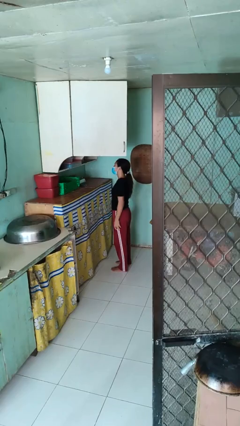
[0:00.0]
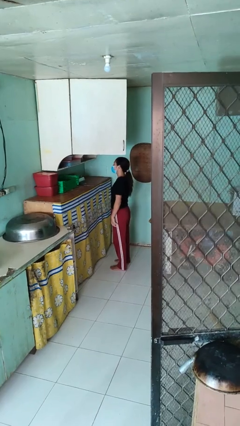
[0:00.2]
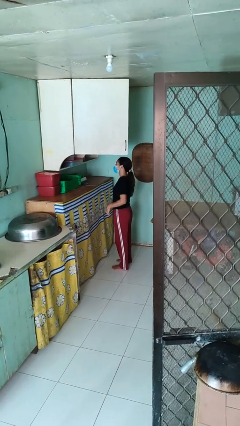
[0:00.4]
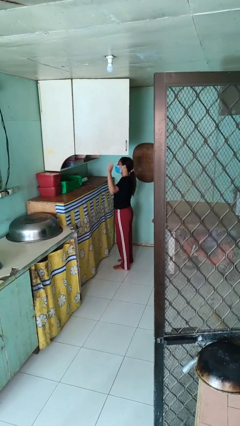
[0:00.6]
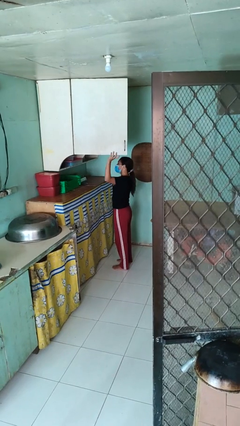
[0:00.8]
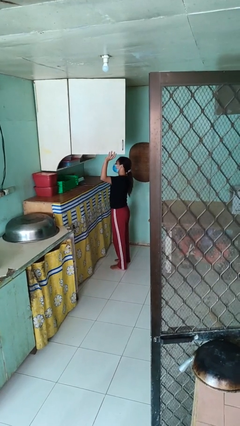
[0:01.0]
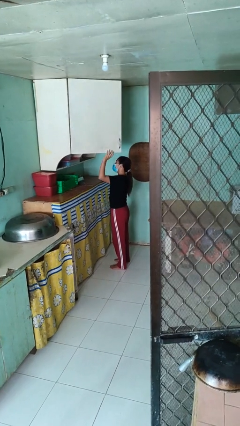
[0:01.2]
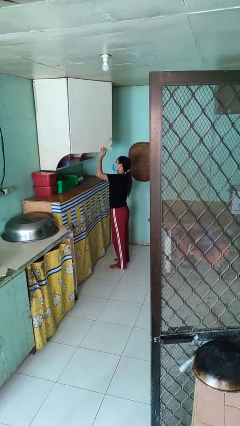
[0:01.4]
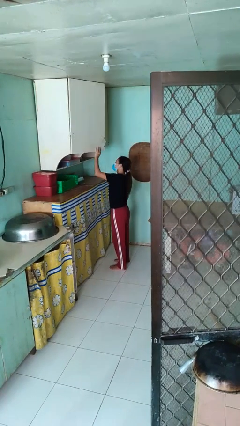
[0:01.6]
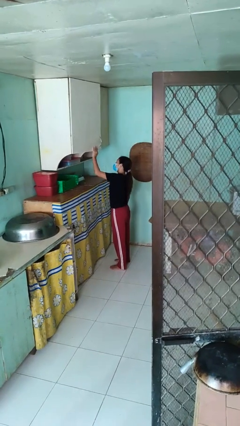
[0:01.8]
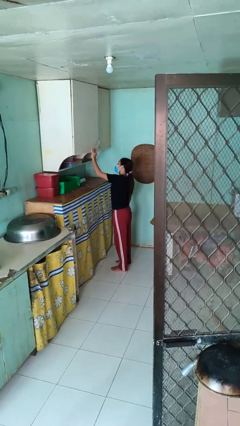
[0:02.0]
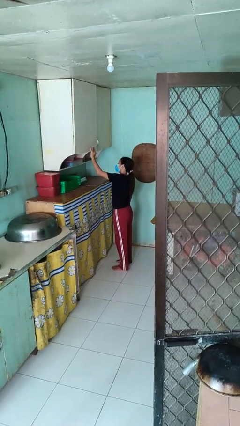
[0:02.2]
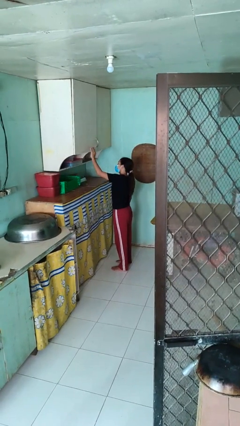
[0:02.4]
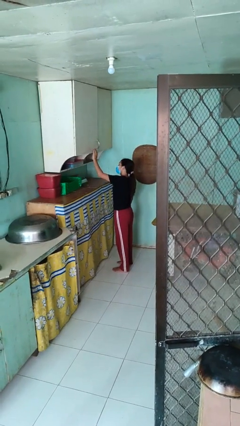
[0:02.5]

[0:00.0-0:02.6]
person closes cabinet

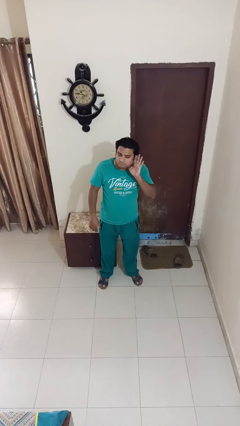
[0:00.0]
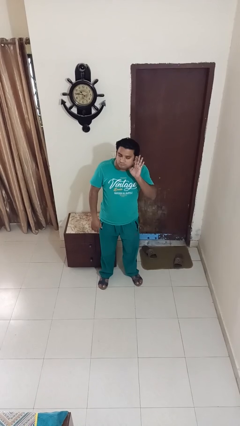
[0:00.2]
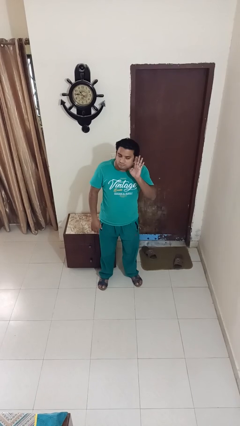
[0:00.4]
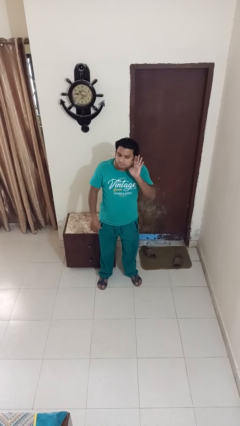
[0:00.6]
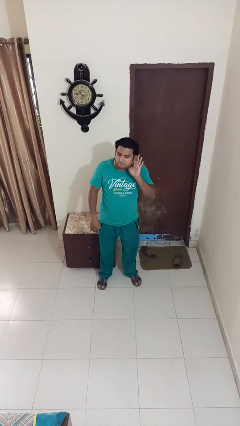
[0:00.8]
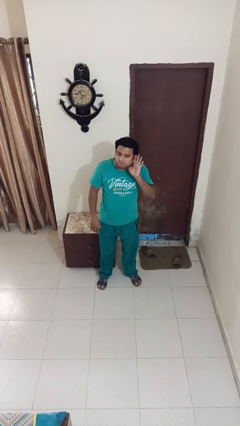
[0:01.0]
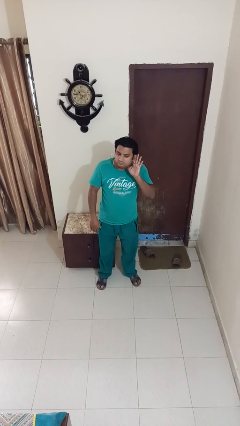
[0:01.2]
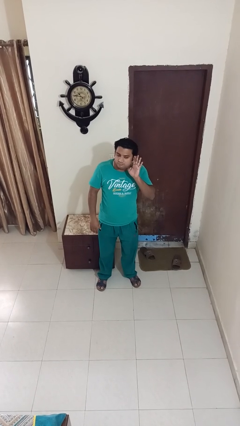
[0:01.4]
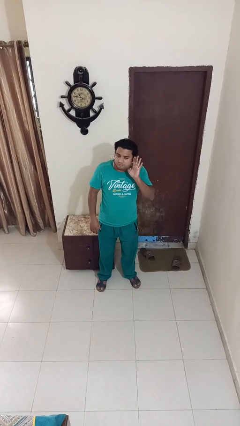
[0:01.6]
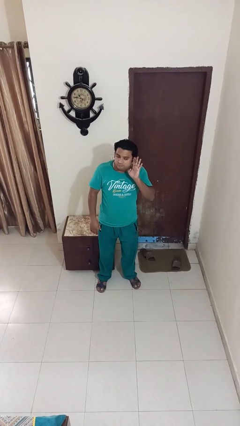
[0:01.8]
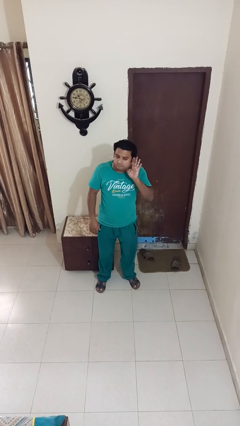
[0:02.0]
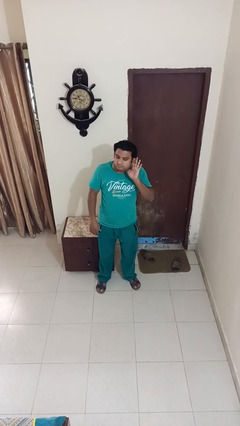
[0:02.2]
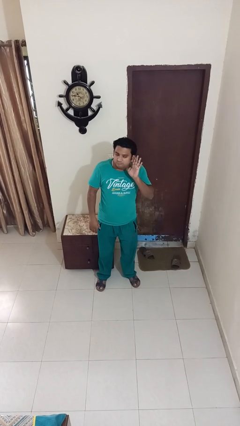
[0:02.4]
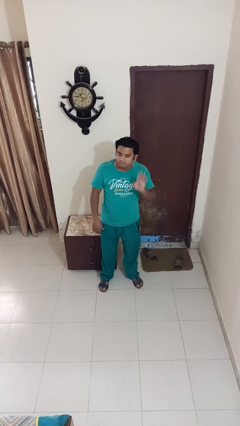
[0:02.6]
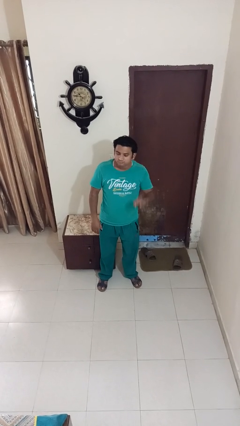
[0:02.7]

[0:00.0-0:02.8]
person gestures listen closely

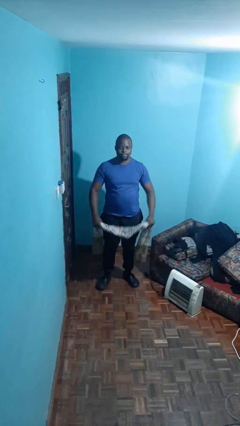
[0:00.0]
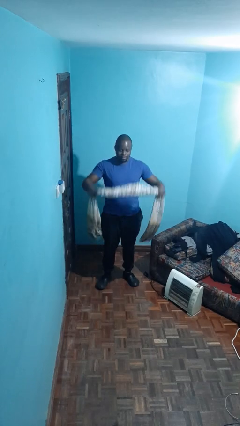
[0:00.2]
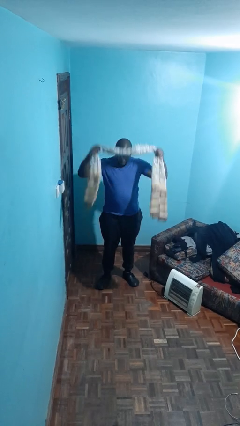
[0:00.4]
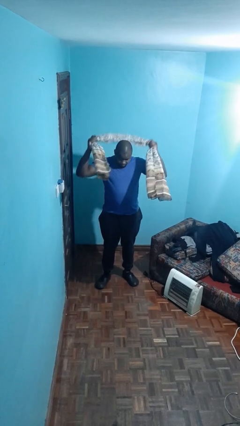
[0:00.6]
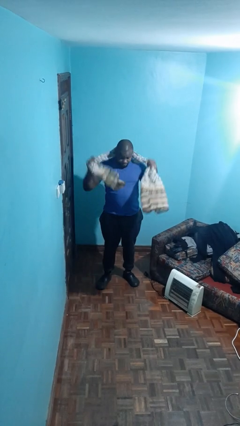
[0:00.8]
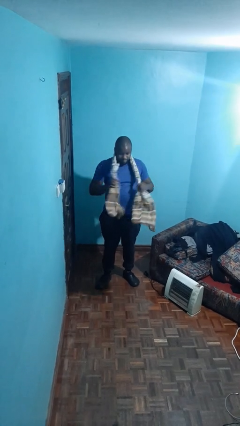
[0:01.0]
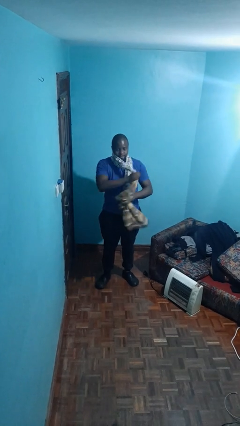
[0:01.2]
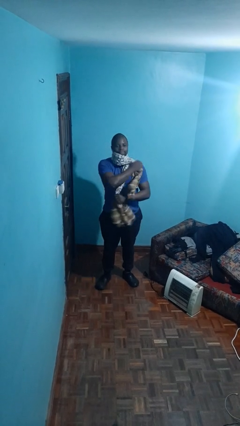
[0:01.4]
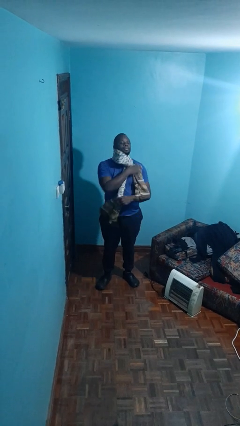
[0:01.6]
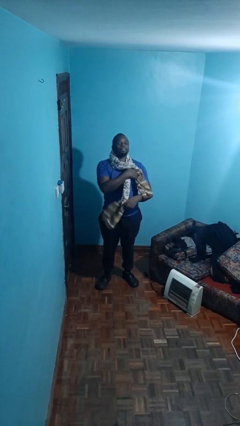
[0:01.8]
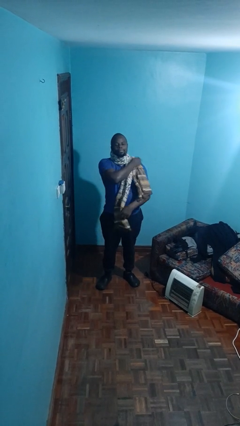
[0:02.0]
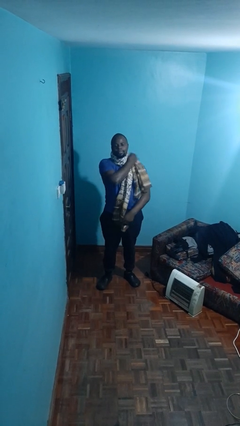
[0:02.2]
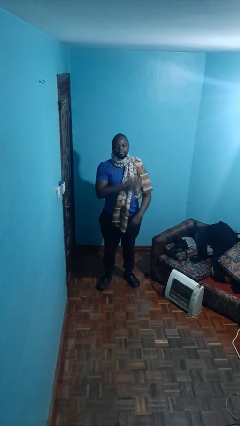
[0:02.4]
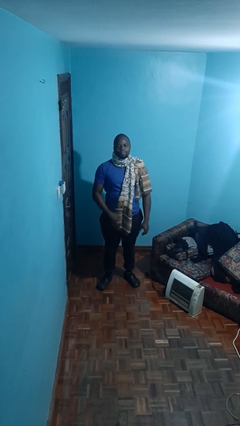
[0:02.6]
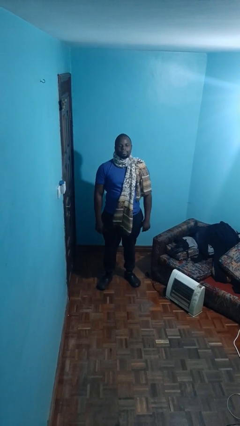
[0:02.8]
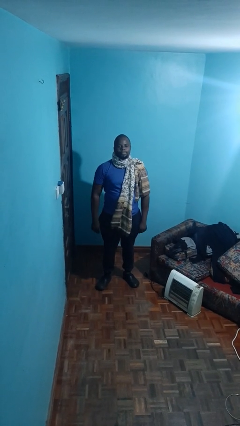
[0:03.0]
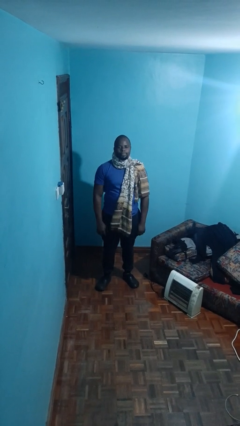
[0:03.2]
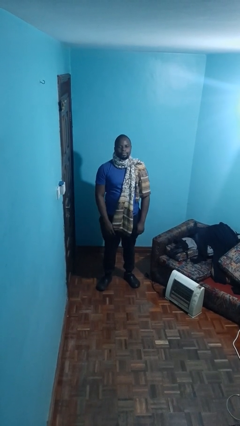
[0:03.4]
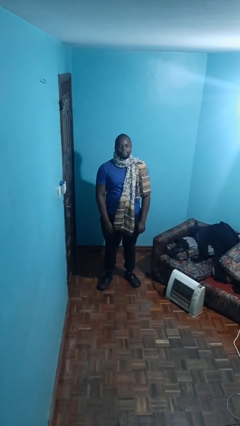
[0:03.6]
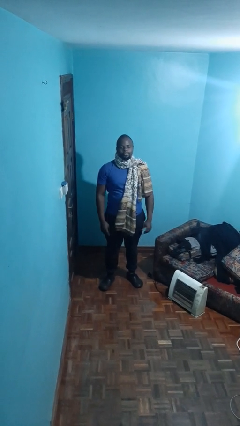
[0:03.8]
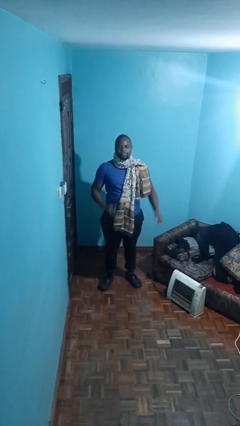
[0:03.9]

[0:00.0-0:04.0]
person puts on scarf

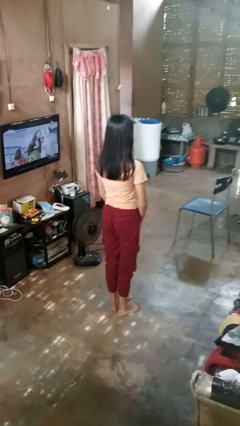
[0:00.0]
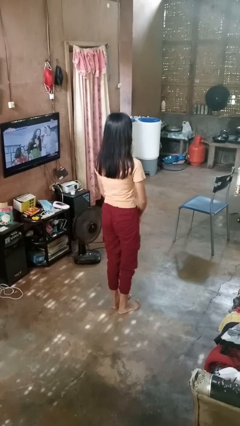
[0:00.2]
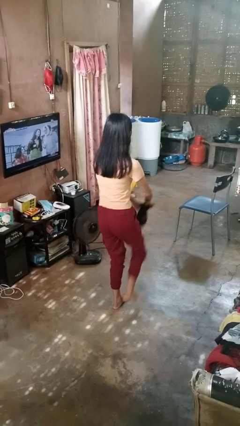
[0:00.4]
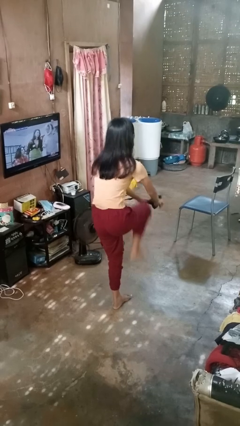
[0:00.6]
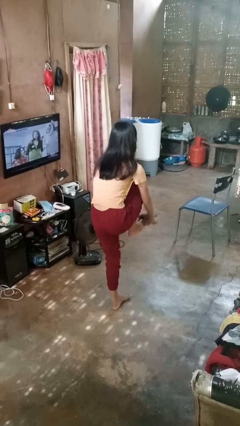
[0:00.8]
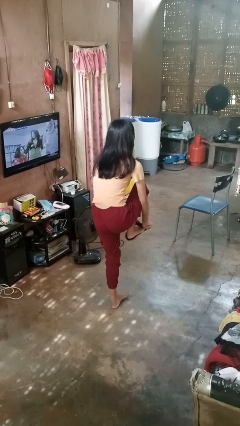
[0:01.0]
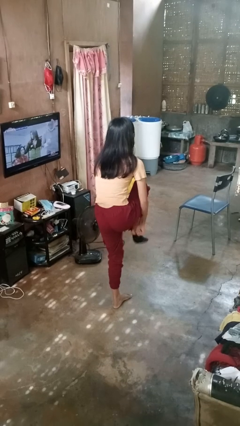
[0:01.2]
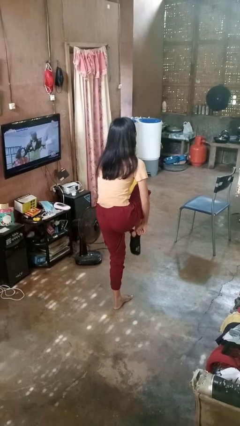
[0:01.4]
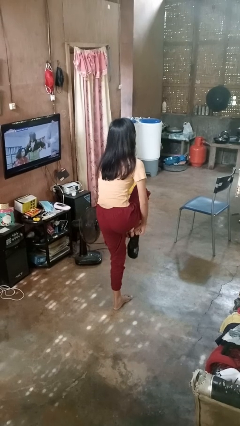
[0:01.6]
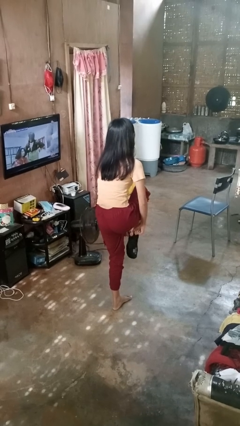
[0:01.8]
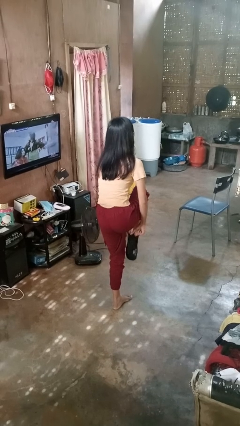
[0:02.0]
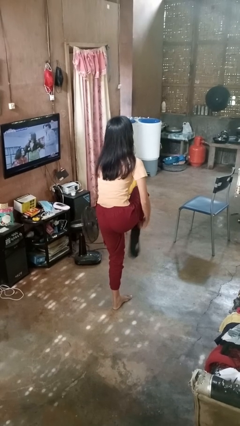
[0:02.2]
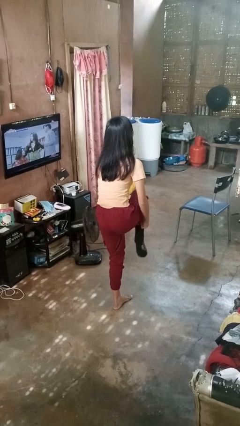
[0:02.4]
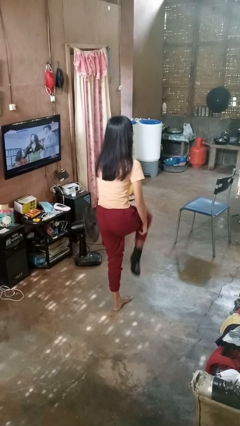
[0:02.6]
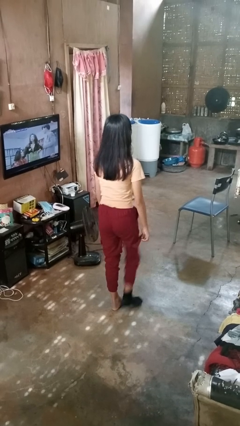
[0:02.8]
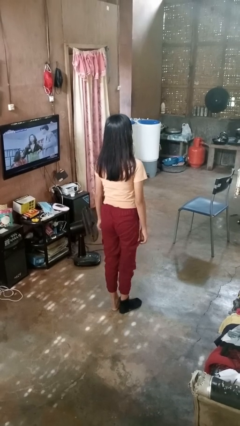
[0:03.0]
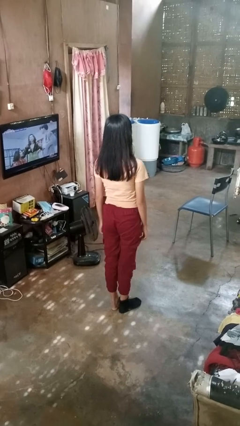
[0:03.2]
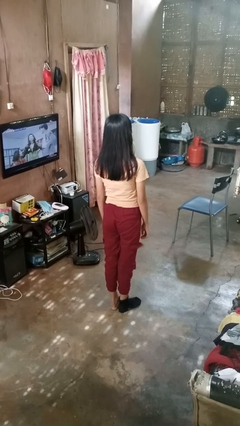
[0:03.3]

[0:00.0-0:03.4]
person puts on socks

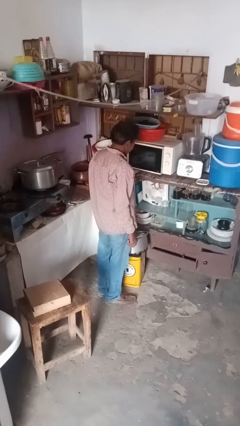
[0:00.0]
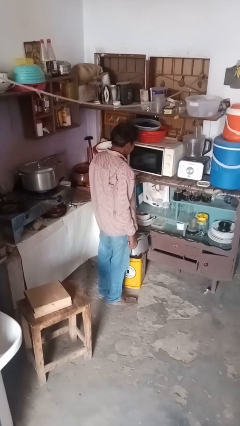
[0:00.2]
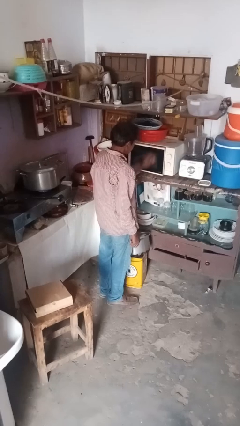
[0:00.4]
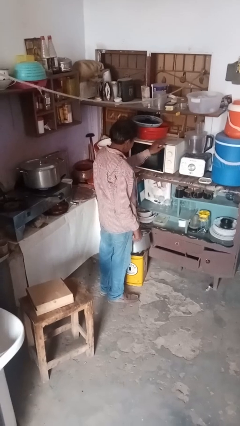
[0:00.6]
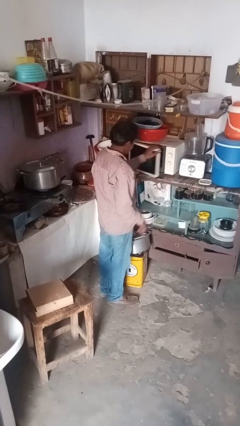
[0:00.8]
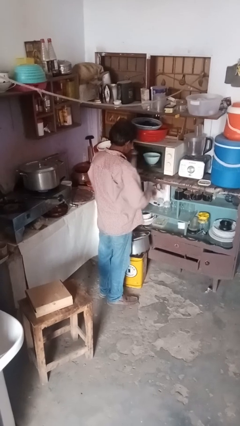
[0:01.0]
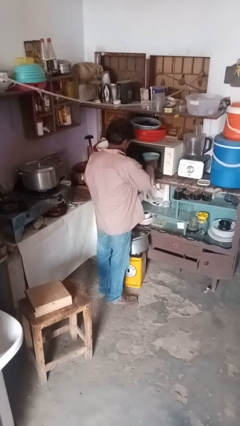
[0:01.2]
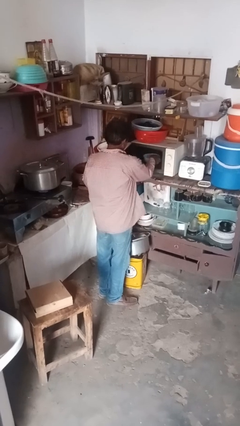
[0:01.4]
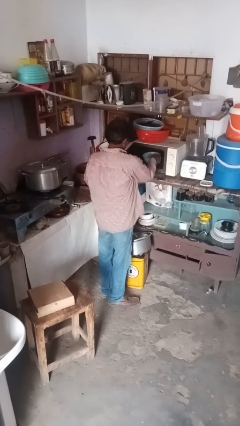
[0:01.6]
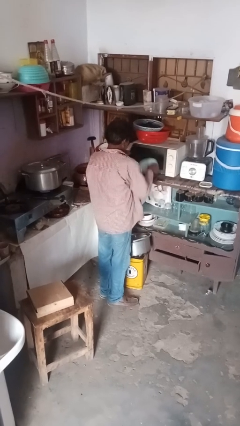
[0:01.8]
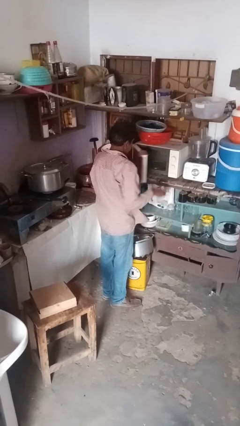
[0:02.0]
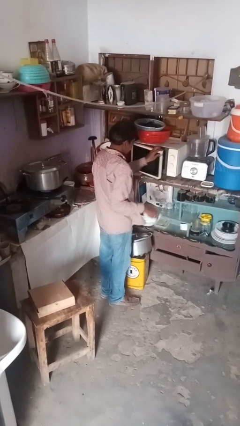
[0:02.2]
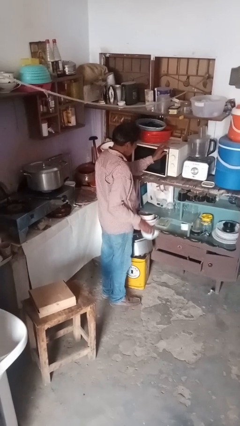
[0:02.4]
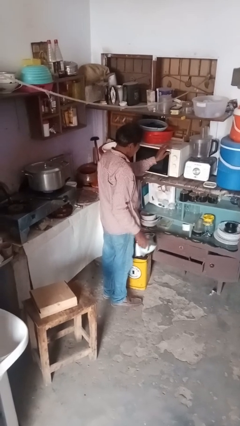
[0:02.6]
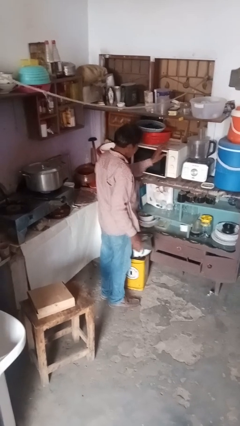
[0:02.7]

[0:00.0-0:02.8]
person takes object from microwave

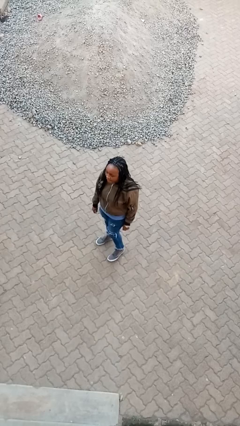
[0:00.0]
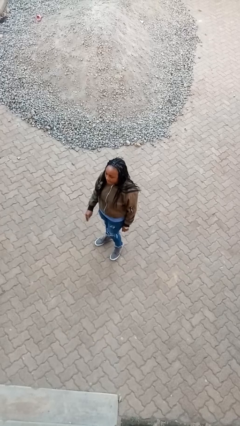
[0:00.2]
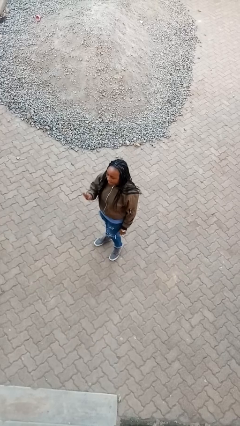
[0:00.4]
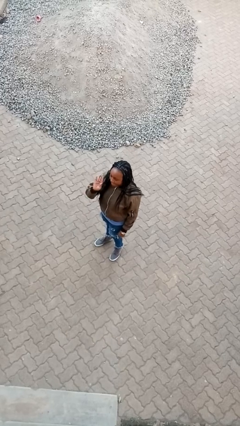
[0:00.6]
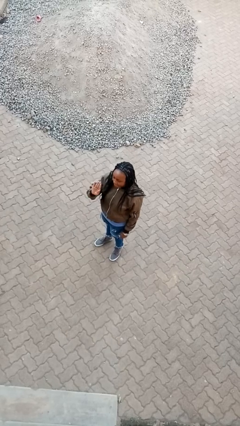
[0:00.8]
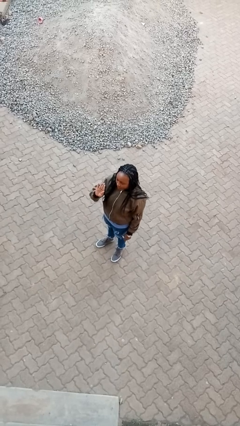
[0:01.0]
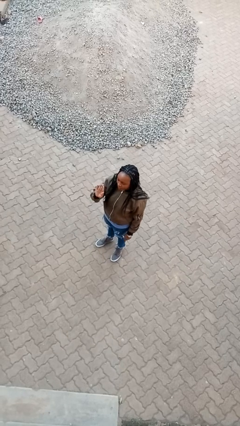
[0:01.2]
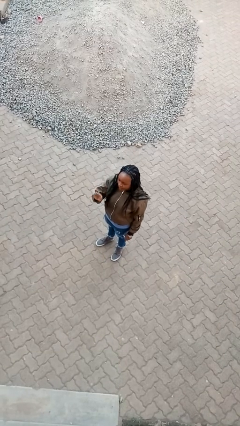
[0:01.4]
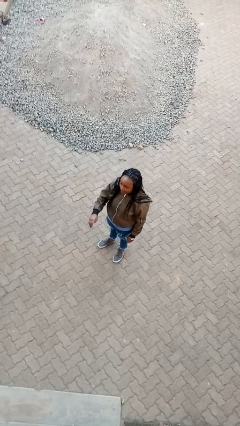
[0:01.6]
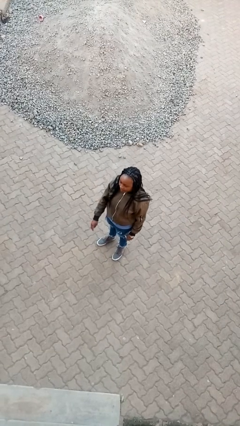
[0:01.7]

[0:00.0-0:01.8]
person gestures stop

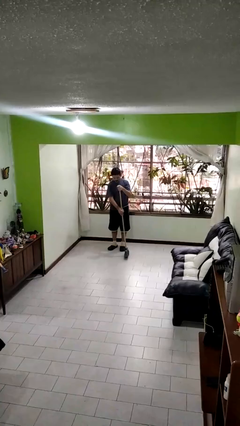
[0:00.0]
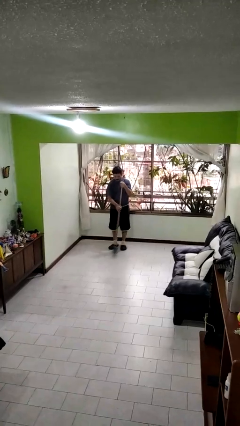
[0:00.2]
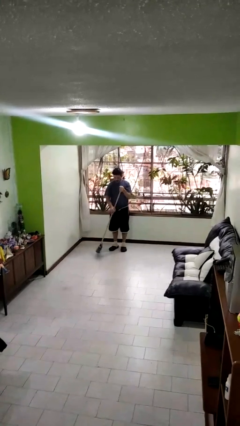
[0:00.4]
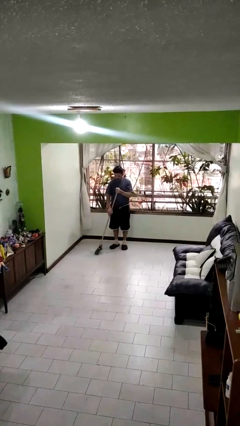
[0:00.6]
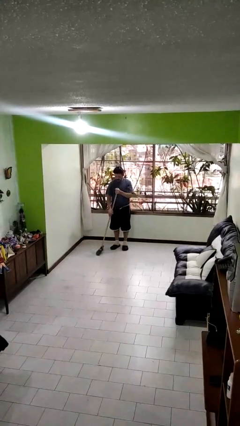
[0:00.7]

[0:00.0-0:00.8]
person sweeps floor
